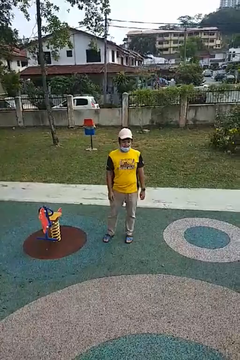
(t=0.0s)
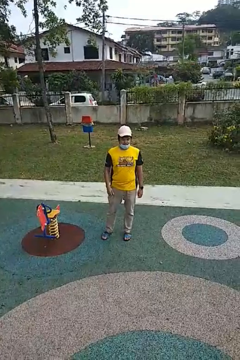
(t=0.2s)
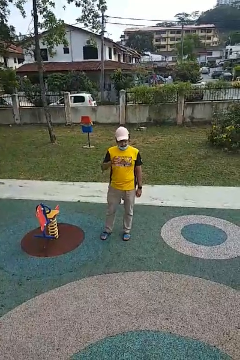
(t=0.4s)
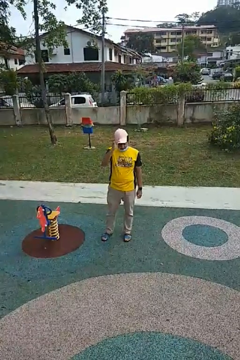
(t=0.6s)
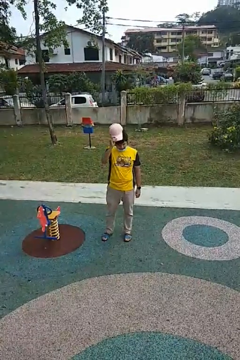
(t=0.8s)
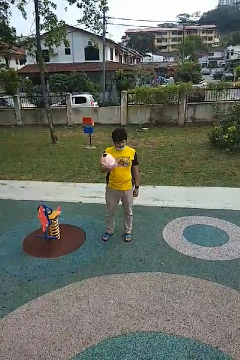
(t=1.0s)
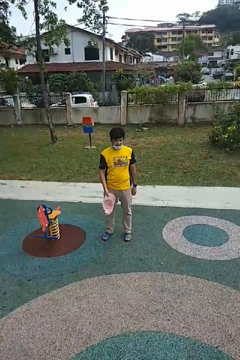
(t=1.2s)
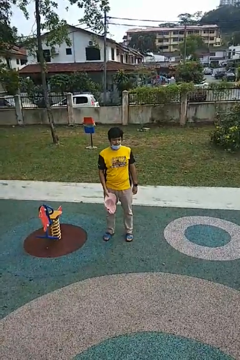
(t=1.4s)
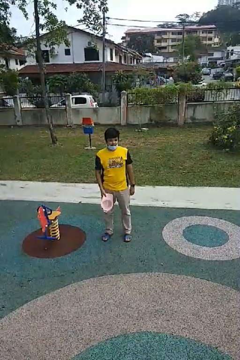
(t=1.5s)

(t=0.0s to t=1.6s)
person takes off hat

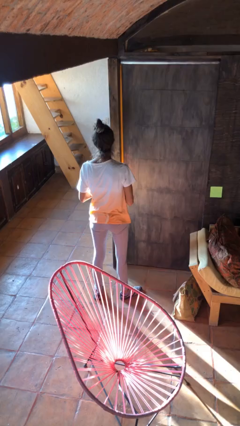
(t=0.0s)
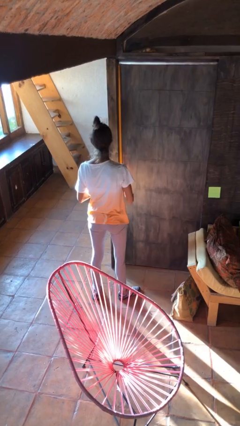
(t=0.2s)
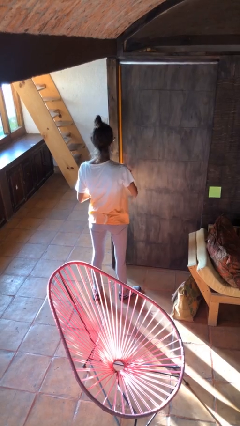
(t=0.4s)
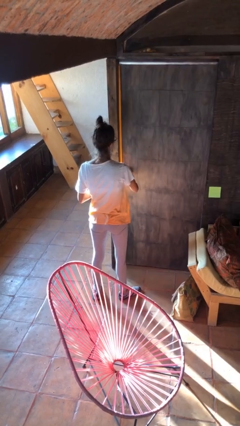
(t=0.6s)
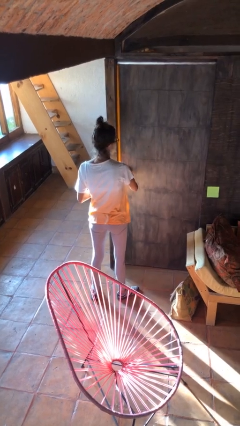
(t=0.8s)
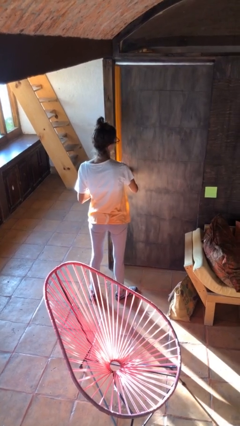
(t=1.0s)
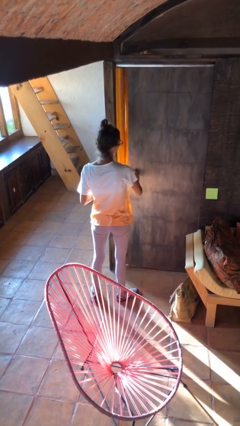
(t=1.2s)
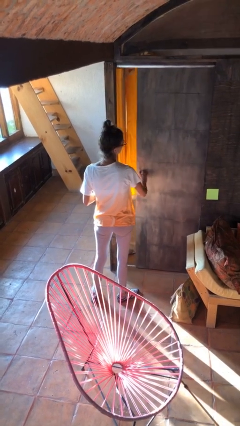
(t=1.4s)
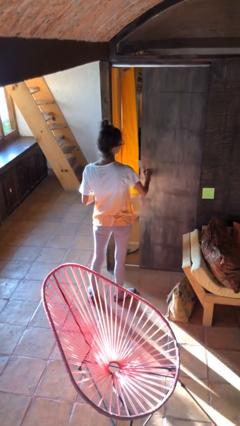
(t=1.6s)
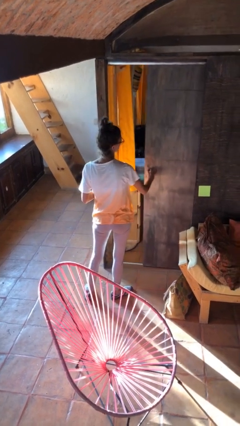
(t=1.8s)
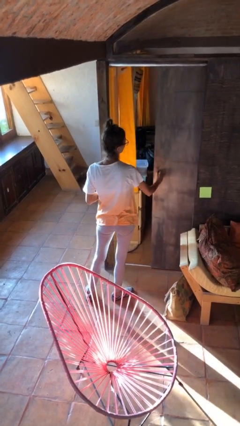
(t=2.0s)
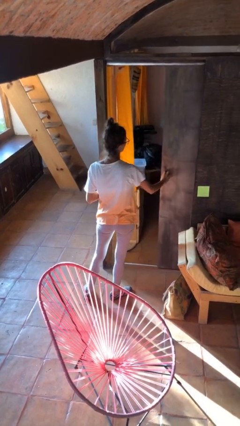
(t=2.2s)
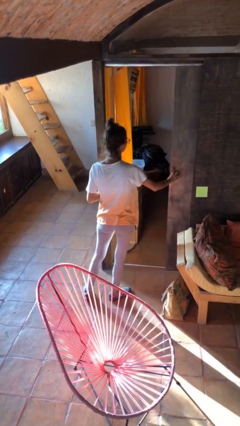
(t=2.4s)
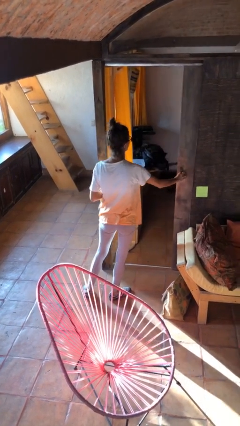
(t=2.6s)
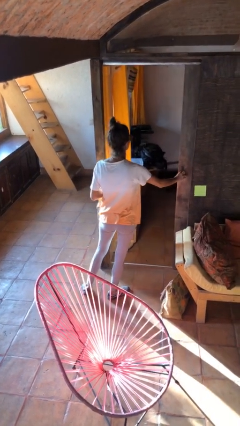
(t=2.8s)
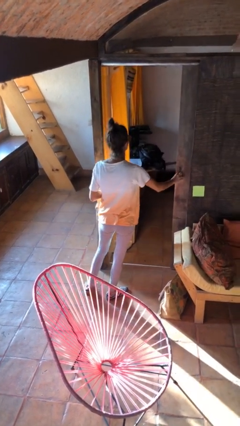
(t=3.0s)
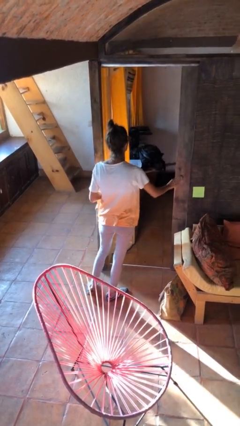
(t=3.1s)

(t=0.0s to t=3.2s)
person opens sliding door

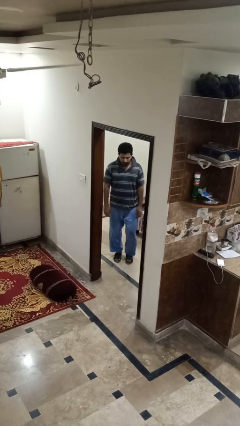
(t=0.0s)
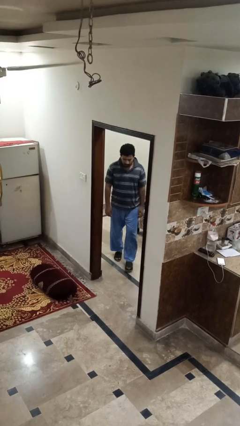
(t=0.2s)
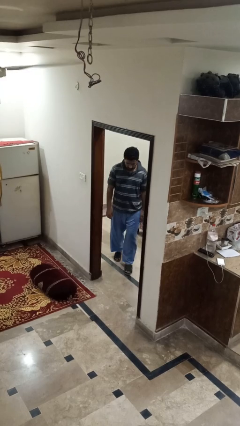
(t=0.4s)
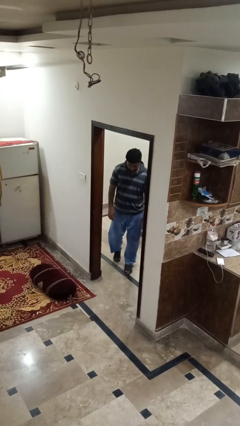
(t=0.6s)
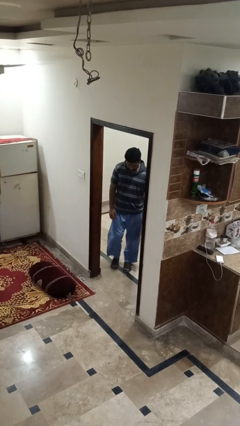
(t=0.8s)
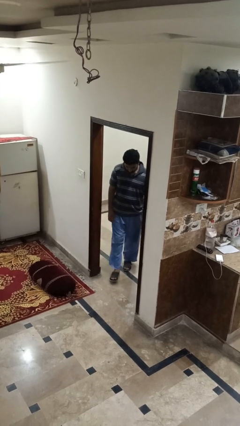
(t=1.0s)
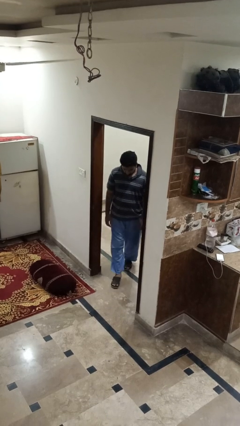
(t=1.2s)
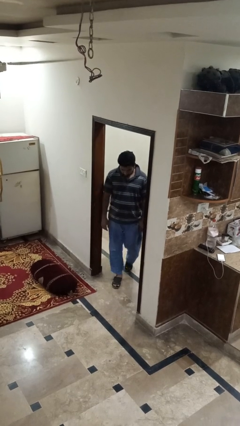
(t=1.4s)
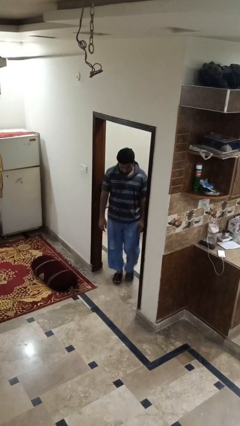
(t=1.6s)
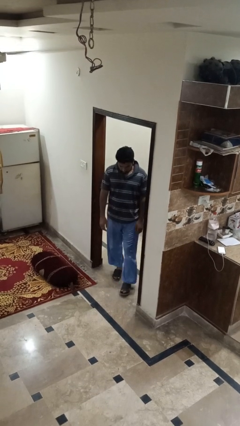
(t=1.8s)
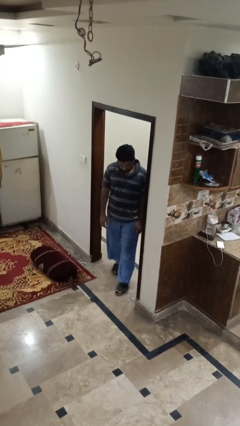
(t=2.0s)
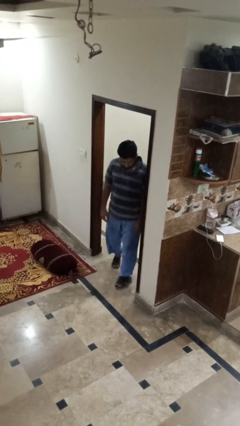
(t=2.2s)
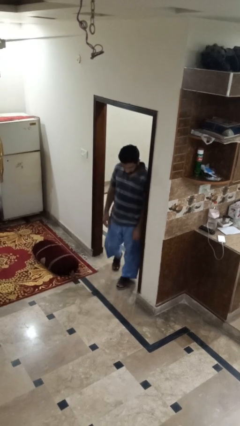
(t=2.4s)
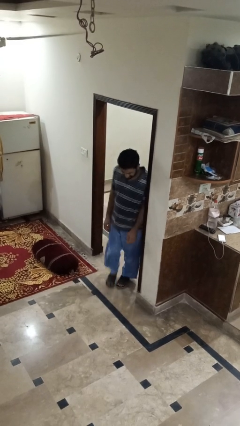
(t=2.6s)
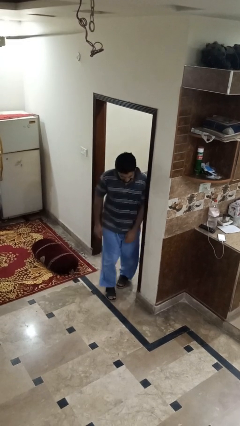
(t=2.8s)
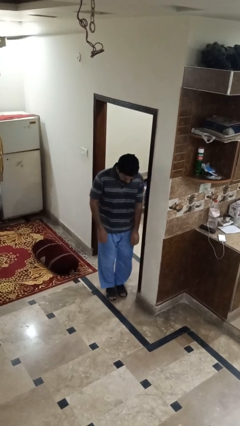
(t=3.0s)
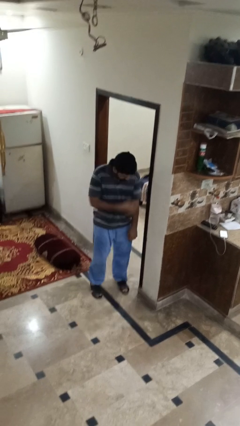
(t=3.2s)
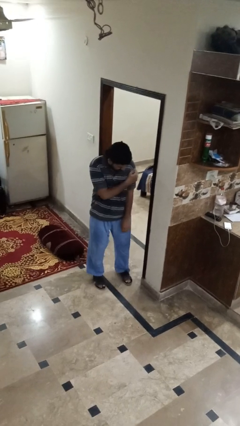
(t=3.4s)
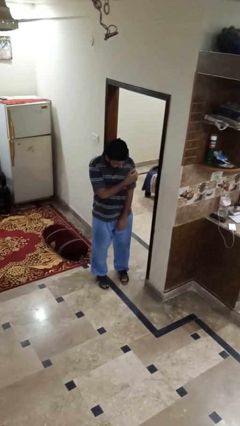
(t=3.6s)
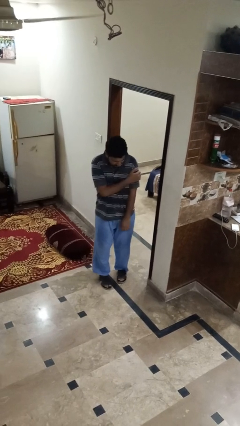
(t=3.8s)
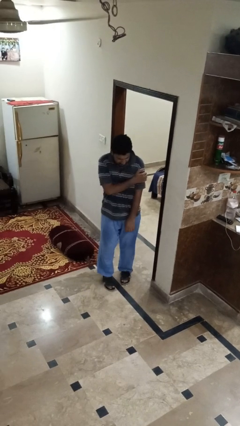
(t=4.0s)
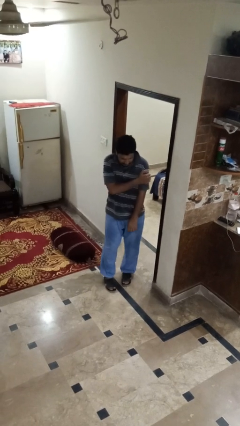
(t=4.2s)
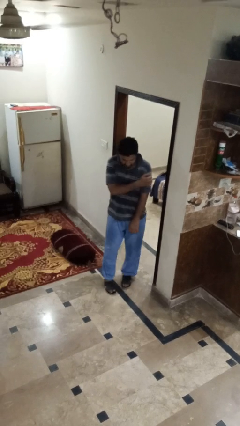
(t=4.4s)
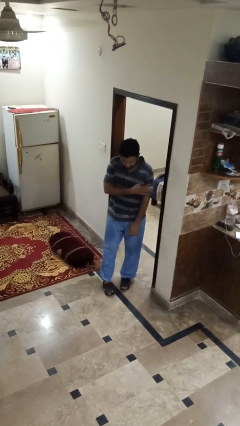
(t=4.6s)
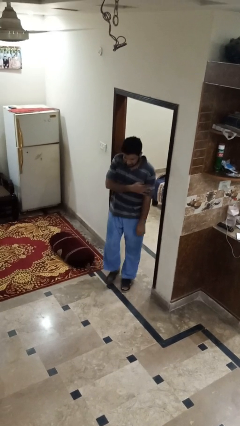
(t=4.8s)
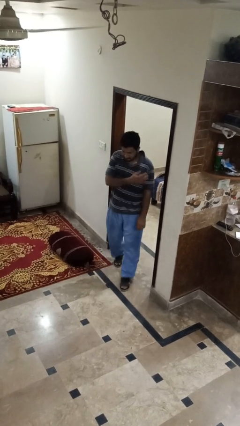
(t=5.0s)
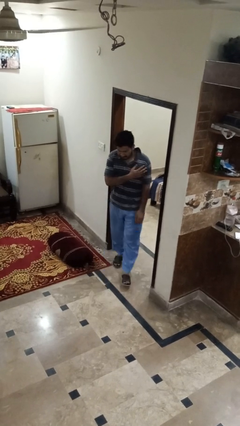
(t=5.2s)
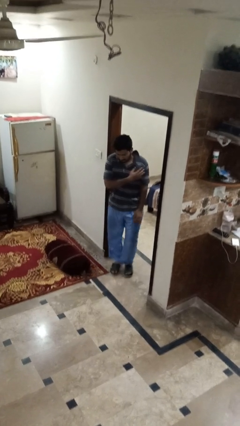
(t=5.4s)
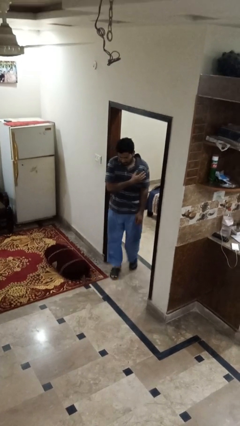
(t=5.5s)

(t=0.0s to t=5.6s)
person bumps into wall

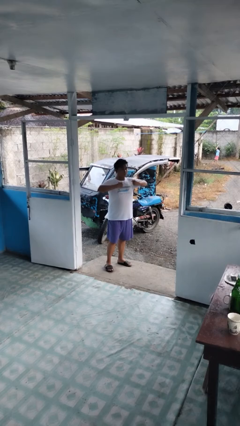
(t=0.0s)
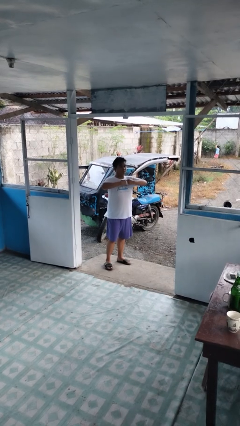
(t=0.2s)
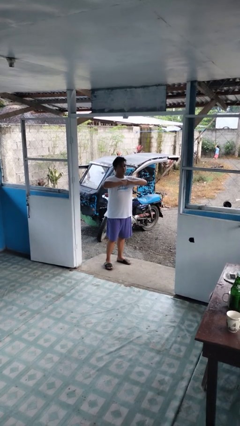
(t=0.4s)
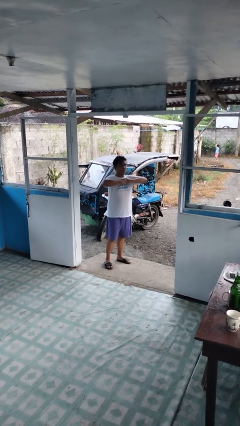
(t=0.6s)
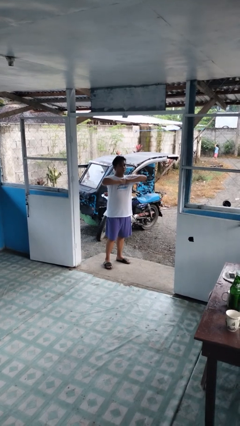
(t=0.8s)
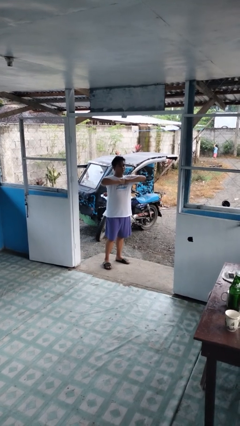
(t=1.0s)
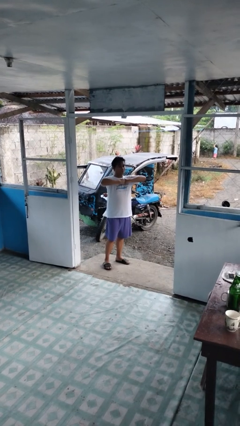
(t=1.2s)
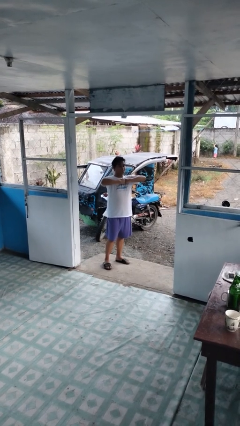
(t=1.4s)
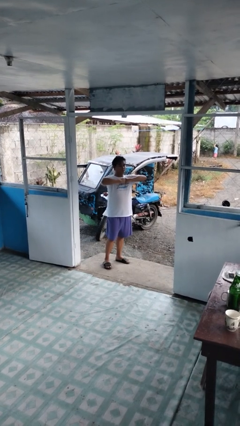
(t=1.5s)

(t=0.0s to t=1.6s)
person gestures zoom out

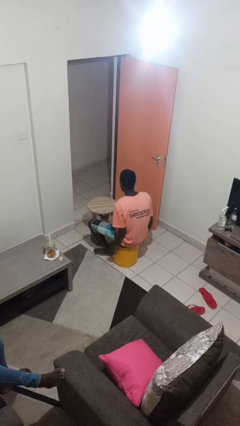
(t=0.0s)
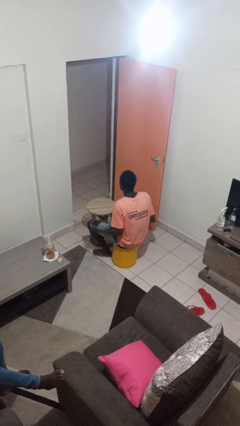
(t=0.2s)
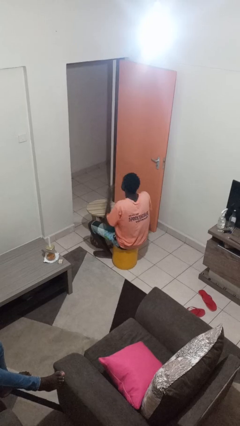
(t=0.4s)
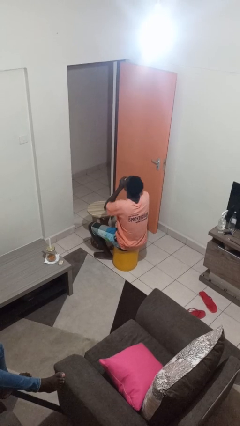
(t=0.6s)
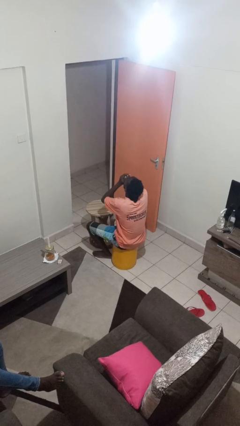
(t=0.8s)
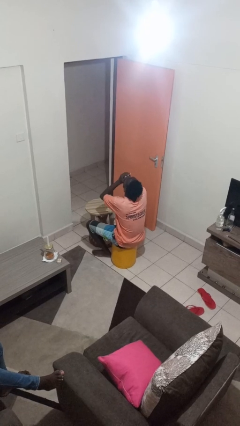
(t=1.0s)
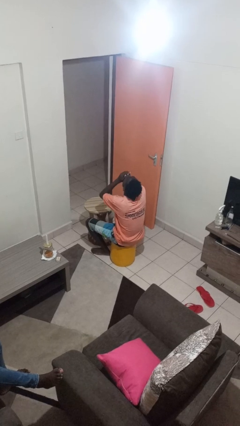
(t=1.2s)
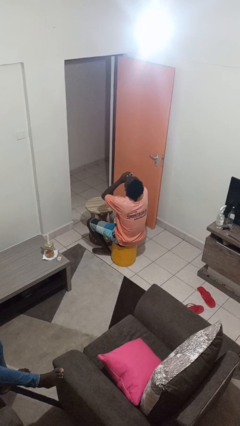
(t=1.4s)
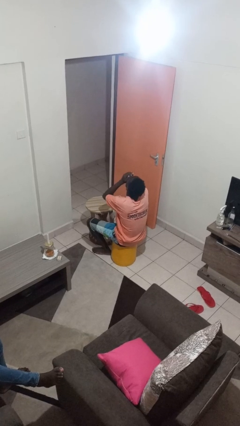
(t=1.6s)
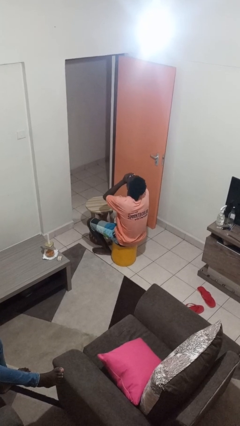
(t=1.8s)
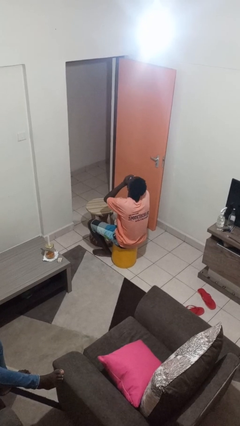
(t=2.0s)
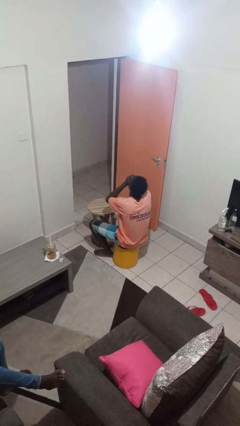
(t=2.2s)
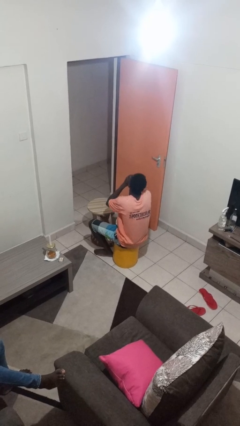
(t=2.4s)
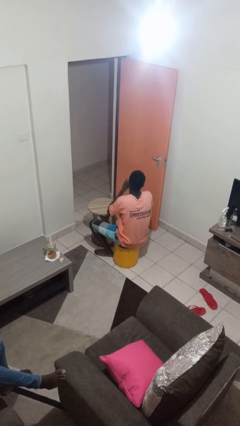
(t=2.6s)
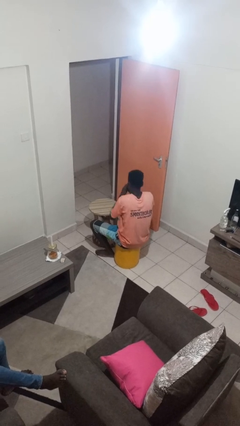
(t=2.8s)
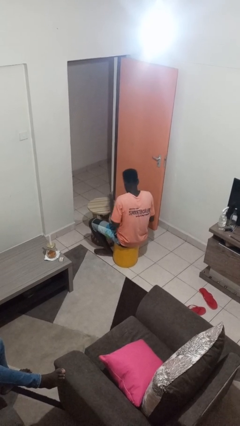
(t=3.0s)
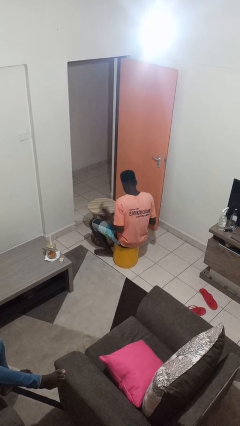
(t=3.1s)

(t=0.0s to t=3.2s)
person yawns

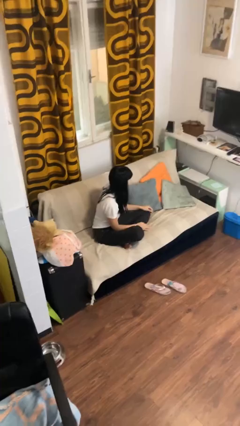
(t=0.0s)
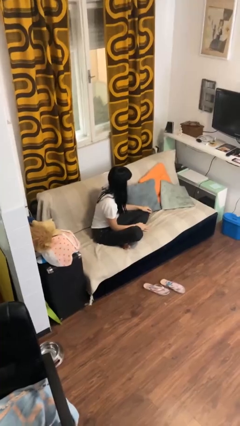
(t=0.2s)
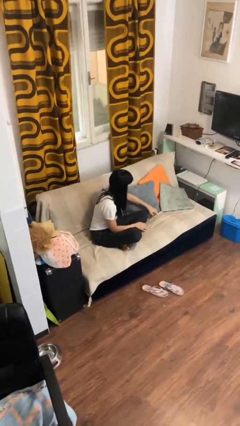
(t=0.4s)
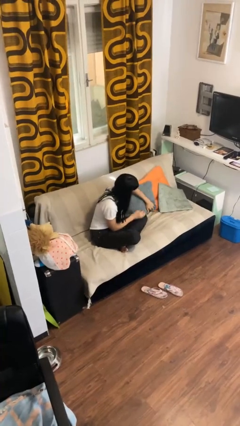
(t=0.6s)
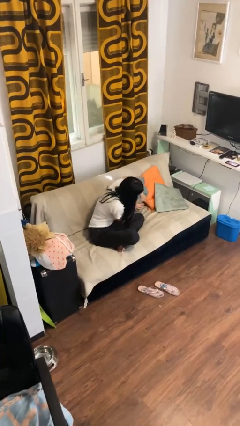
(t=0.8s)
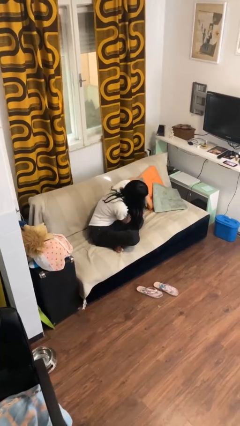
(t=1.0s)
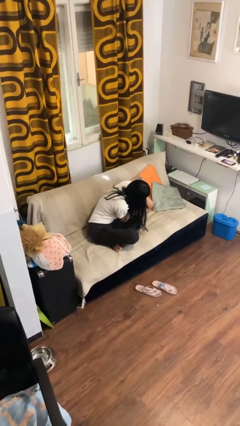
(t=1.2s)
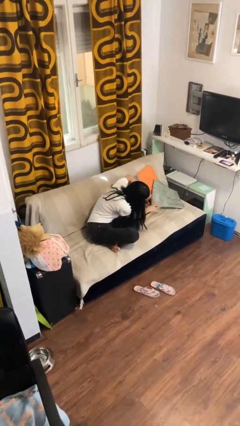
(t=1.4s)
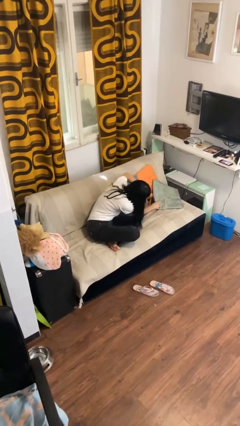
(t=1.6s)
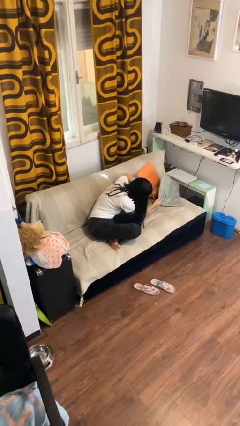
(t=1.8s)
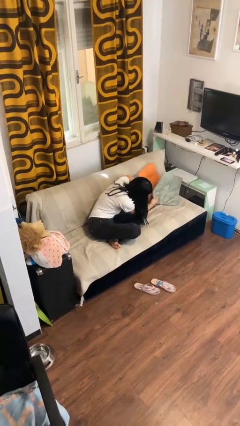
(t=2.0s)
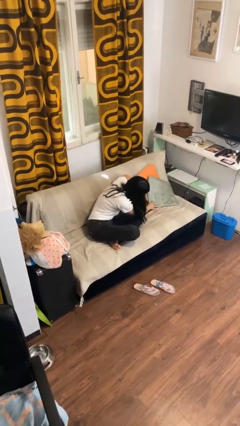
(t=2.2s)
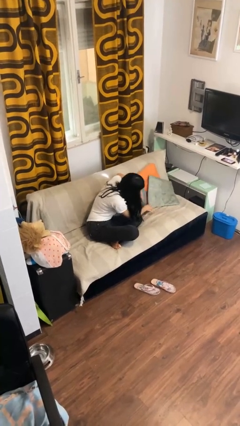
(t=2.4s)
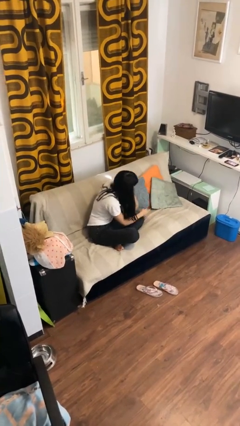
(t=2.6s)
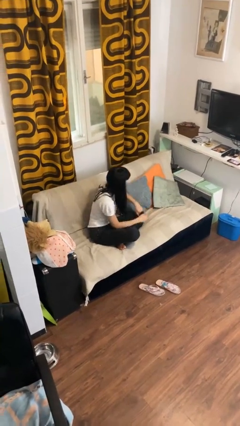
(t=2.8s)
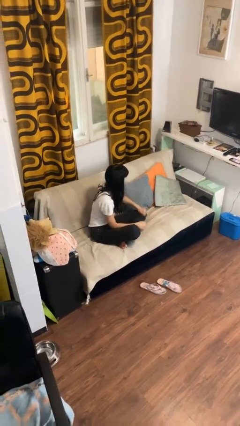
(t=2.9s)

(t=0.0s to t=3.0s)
person searches in couch
